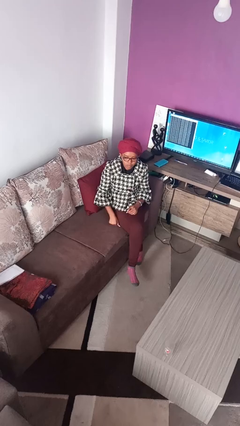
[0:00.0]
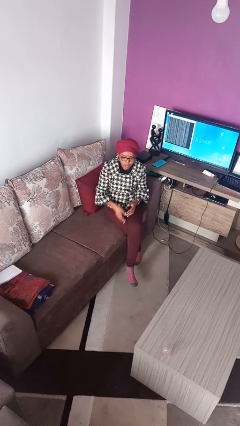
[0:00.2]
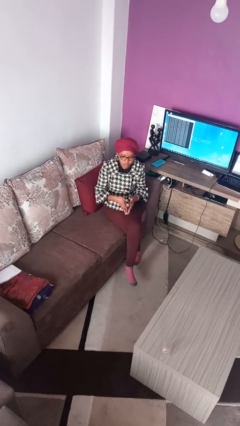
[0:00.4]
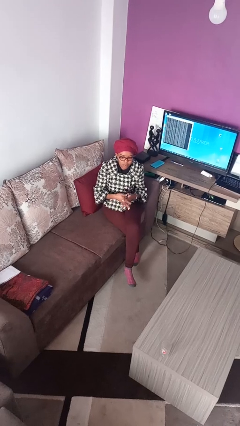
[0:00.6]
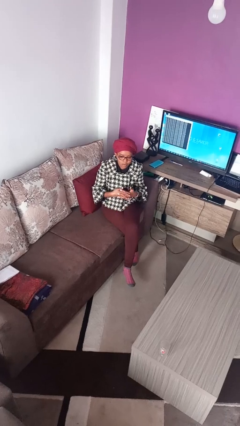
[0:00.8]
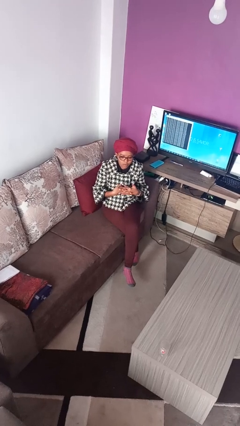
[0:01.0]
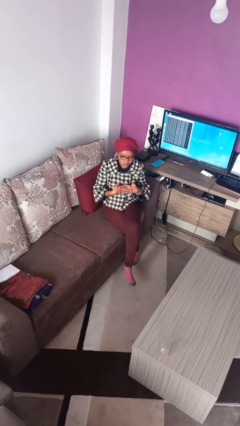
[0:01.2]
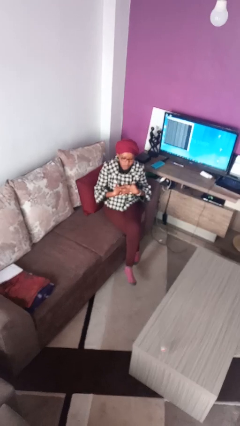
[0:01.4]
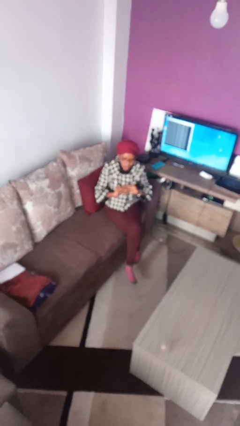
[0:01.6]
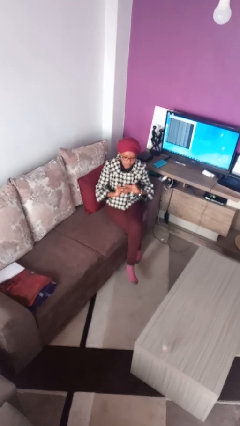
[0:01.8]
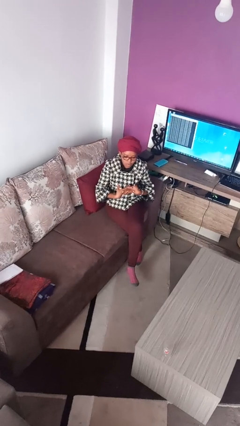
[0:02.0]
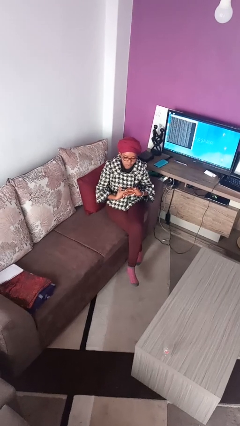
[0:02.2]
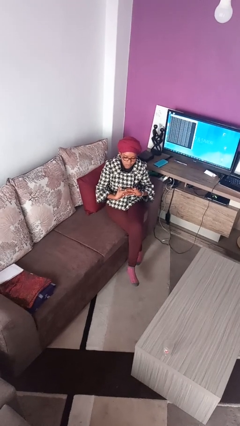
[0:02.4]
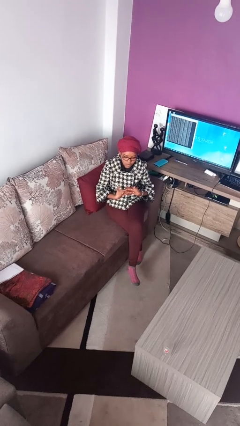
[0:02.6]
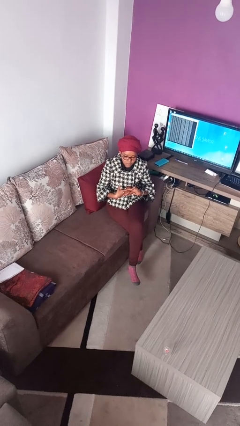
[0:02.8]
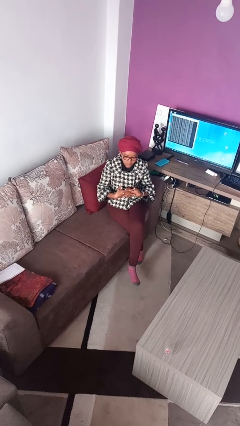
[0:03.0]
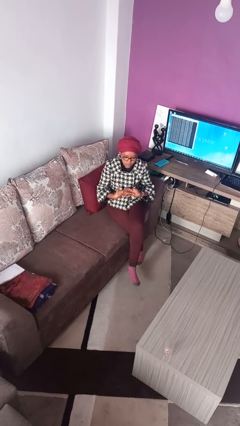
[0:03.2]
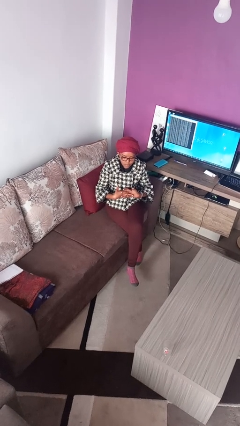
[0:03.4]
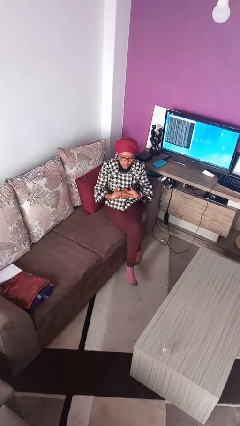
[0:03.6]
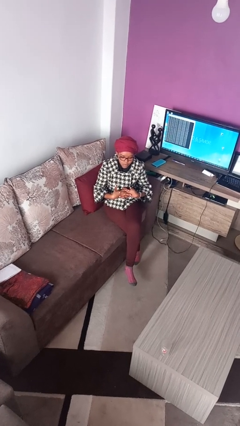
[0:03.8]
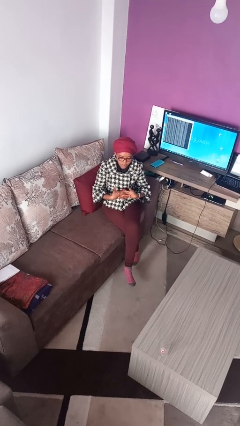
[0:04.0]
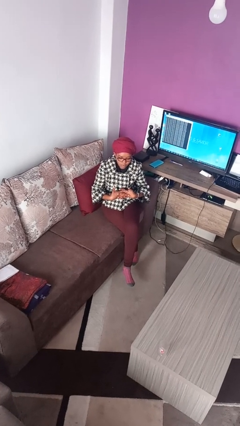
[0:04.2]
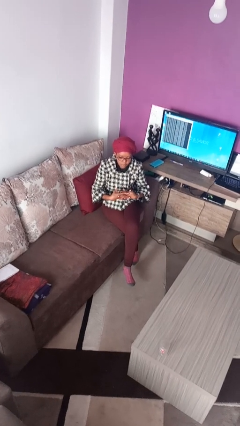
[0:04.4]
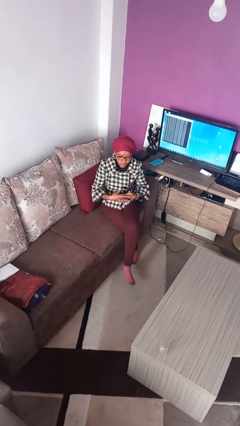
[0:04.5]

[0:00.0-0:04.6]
person cracks knuckles

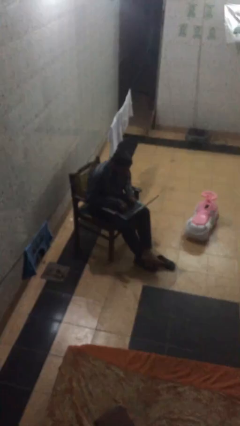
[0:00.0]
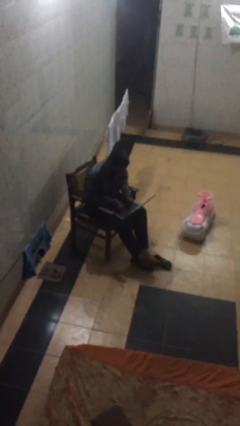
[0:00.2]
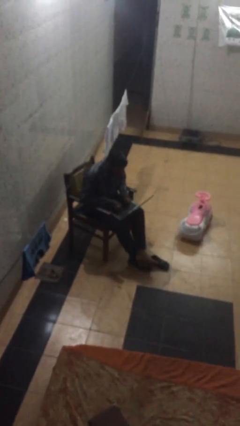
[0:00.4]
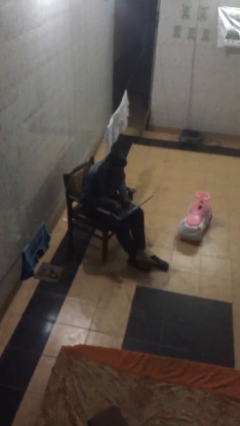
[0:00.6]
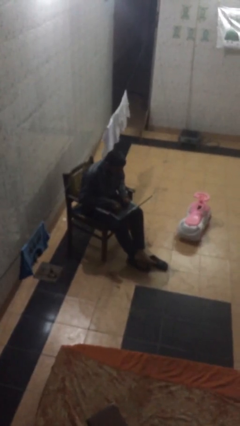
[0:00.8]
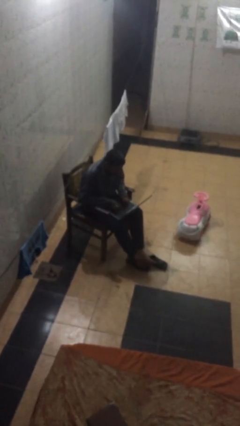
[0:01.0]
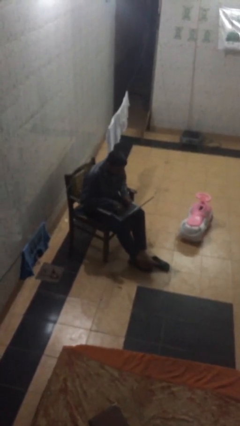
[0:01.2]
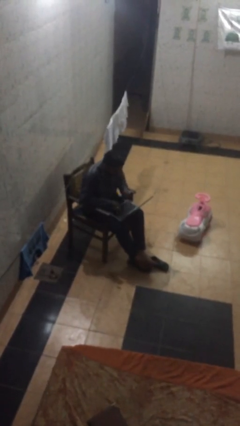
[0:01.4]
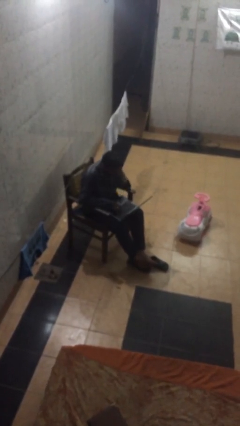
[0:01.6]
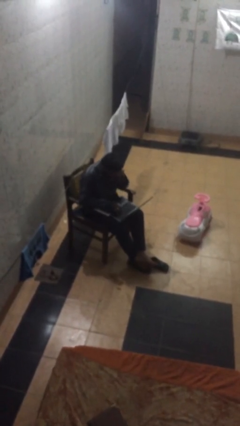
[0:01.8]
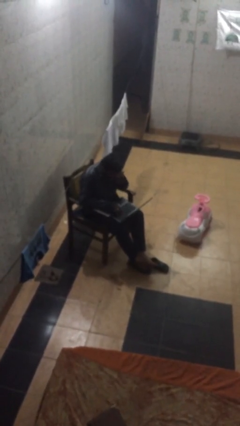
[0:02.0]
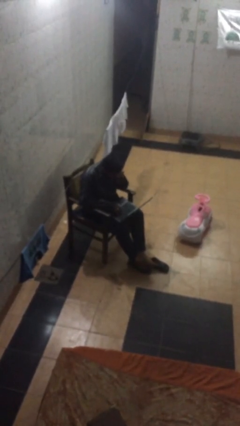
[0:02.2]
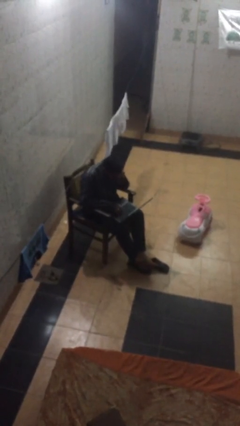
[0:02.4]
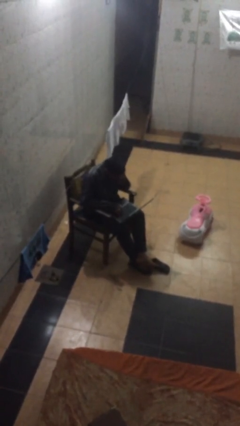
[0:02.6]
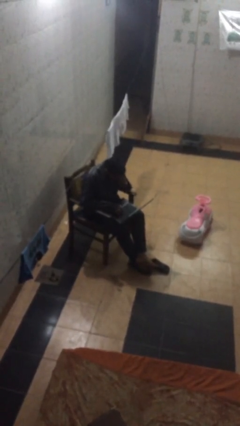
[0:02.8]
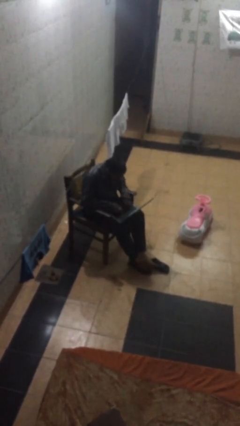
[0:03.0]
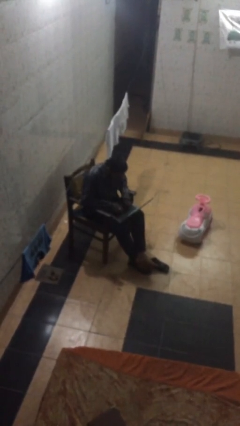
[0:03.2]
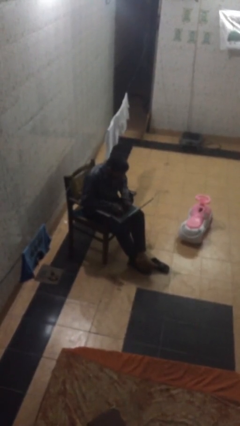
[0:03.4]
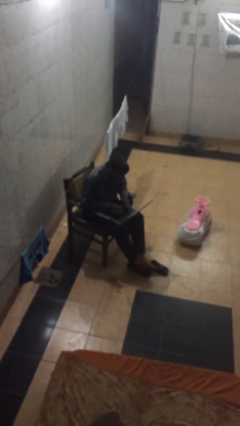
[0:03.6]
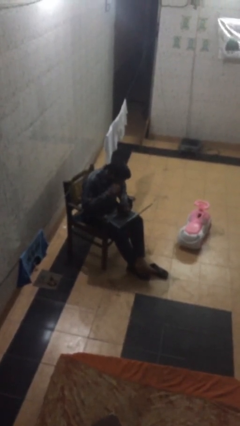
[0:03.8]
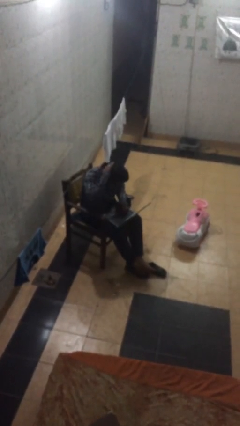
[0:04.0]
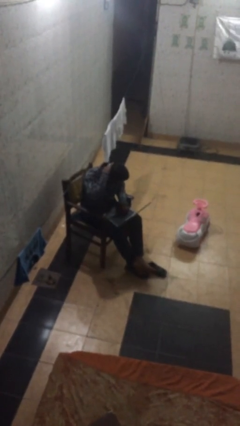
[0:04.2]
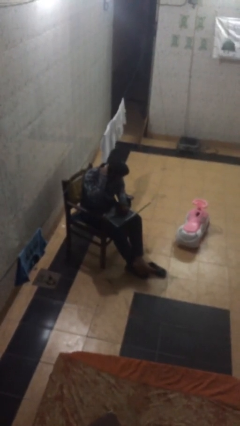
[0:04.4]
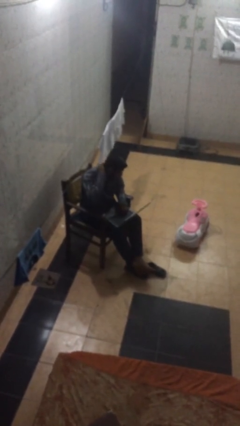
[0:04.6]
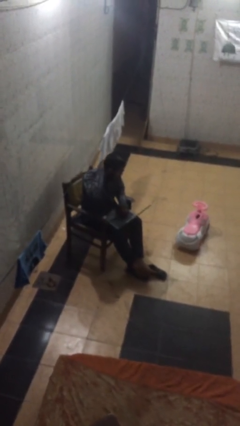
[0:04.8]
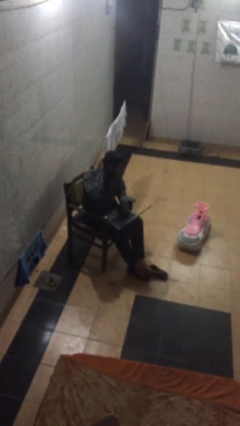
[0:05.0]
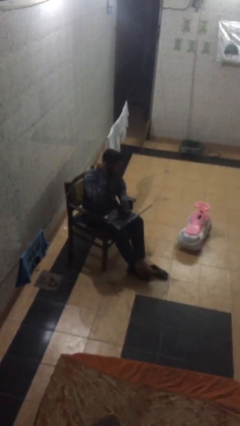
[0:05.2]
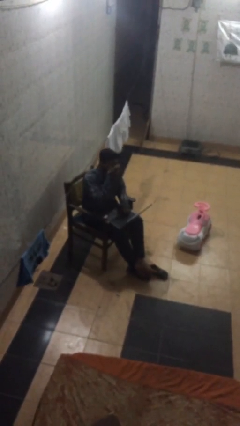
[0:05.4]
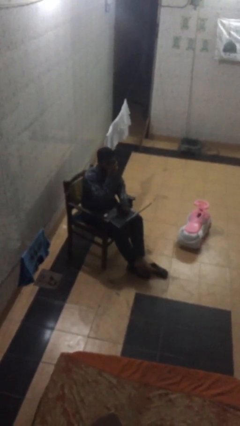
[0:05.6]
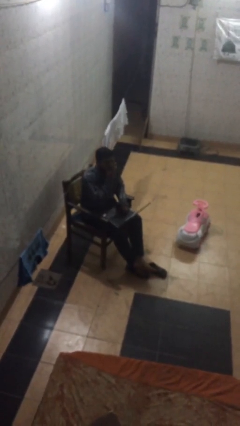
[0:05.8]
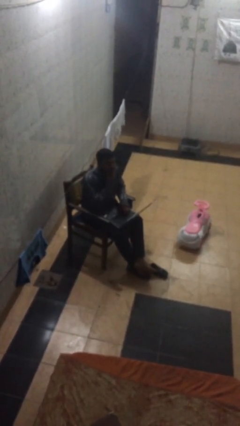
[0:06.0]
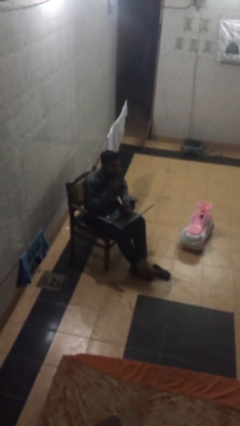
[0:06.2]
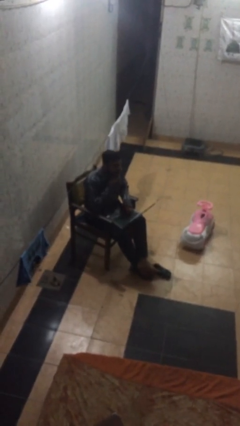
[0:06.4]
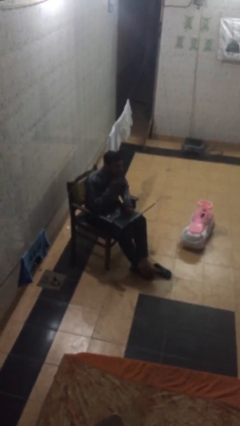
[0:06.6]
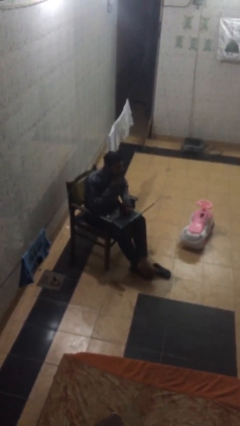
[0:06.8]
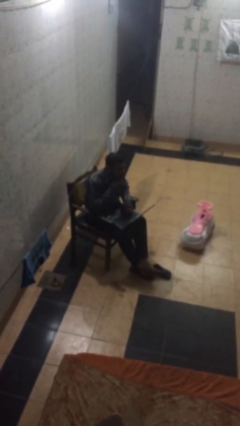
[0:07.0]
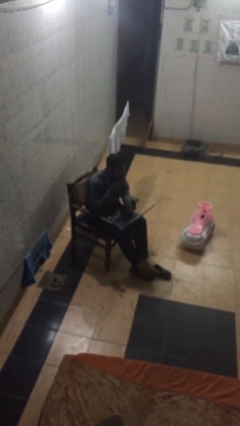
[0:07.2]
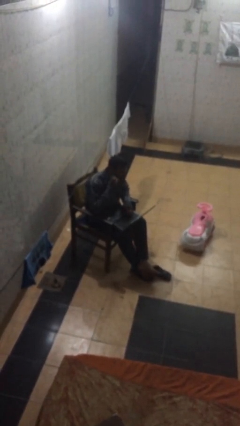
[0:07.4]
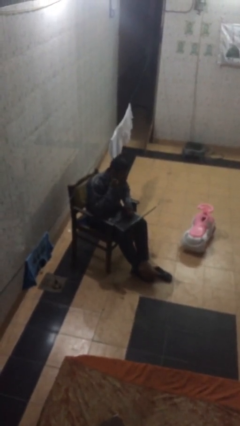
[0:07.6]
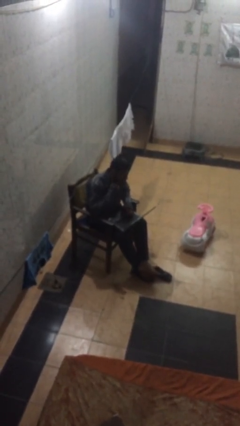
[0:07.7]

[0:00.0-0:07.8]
person interacts with laptop

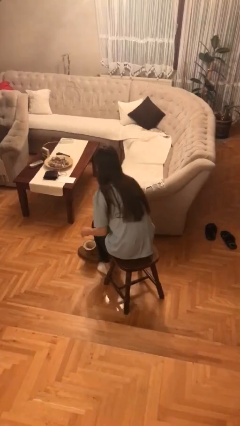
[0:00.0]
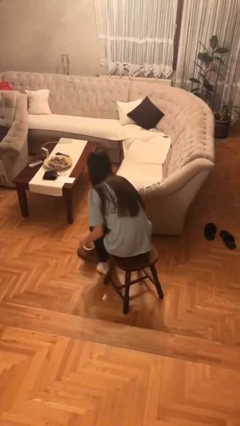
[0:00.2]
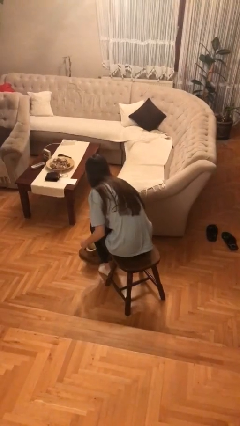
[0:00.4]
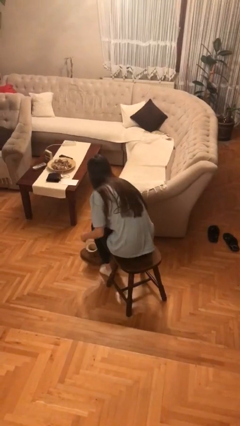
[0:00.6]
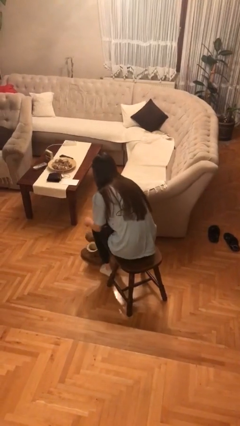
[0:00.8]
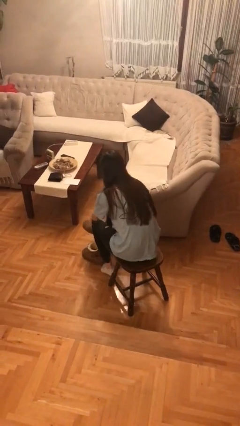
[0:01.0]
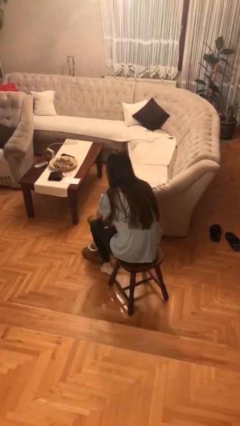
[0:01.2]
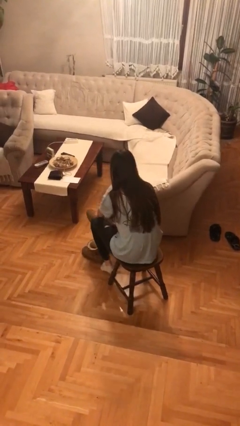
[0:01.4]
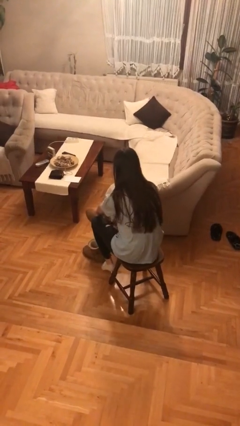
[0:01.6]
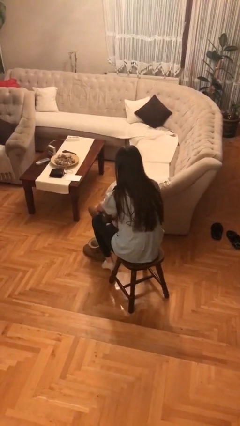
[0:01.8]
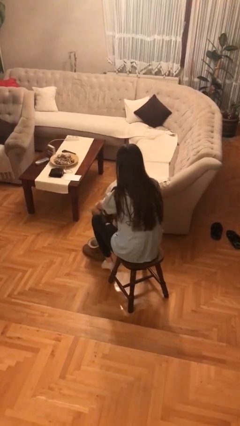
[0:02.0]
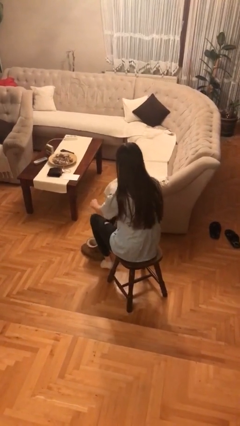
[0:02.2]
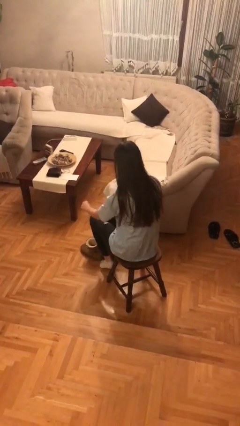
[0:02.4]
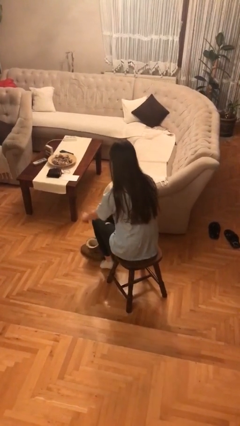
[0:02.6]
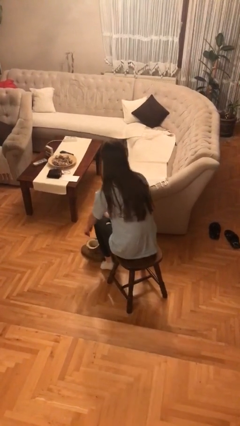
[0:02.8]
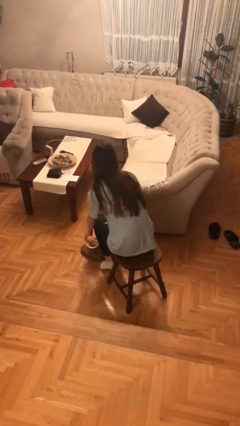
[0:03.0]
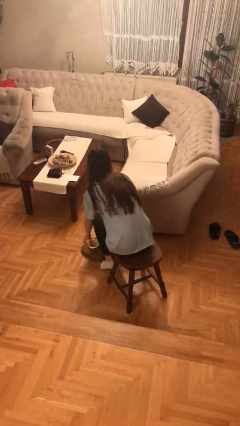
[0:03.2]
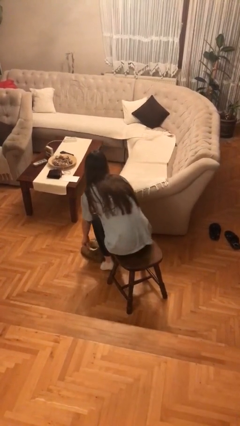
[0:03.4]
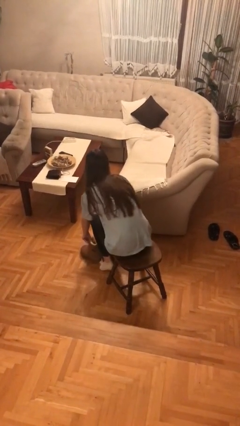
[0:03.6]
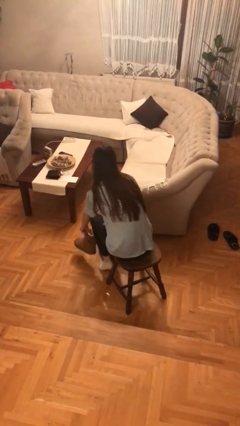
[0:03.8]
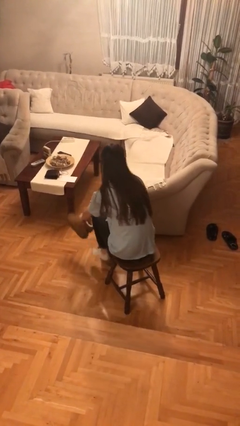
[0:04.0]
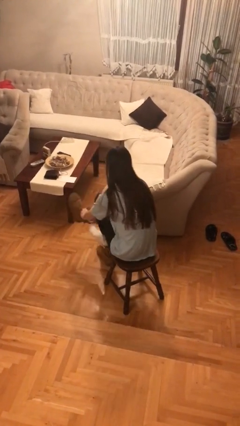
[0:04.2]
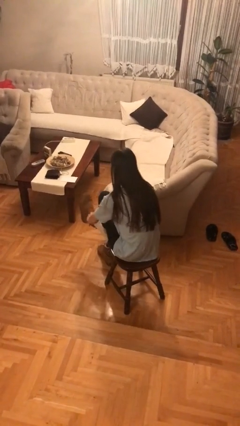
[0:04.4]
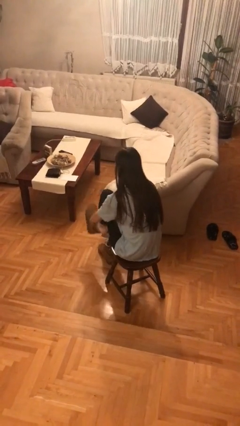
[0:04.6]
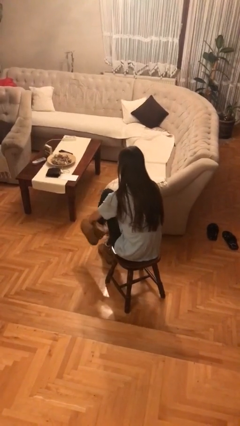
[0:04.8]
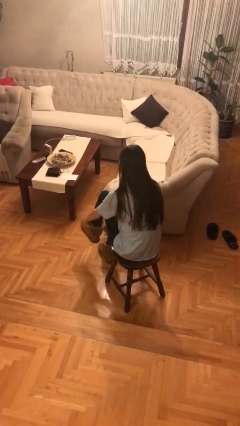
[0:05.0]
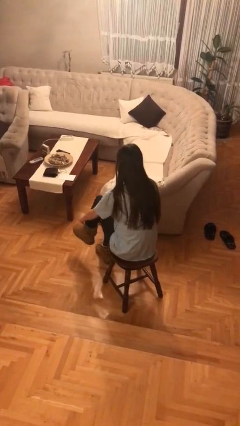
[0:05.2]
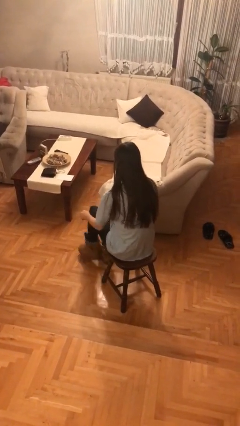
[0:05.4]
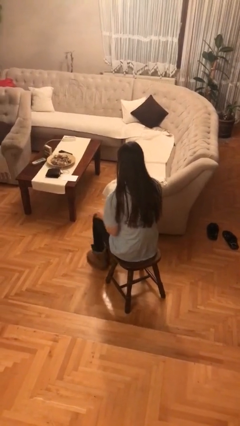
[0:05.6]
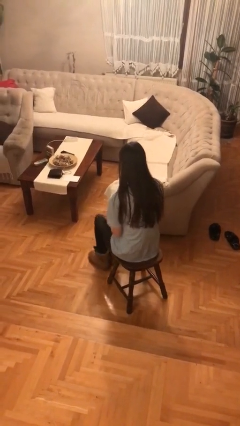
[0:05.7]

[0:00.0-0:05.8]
person puts on shoes
